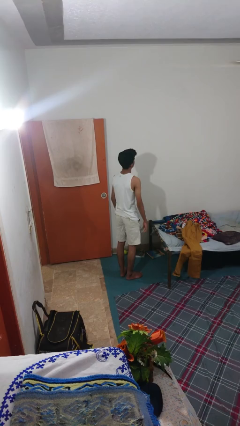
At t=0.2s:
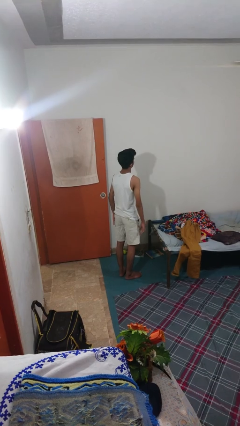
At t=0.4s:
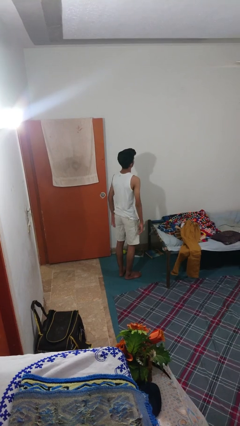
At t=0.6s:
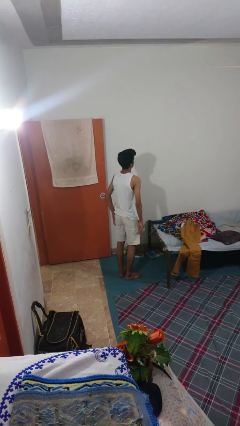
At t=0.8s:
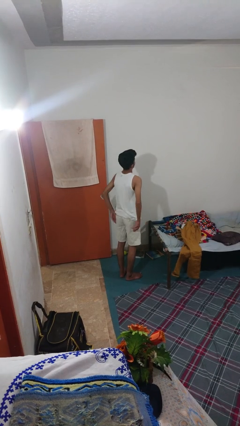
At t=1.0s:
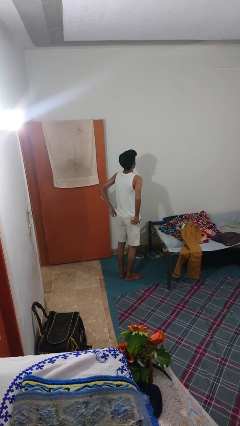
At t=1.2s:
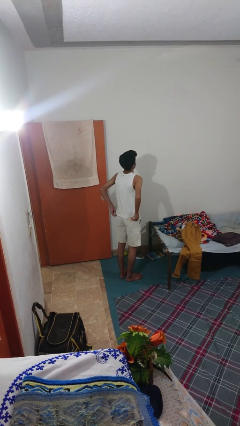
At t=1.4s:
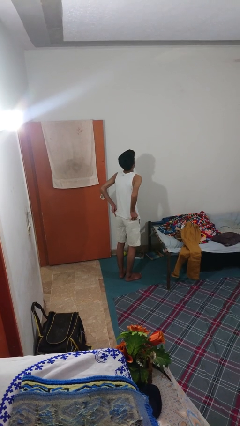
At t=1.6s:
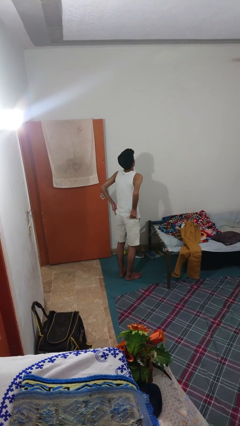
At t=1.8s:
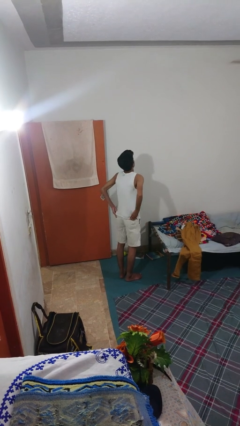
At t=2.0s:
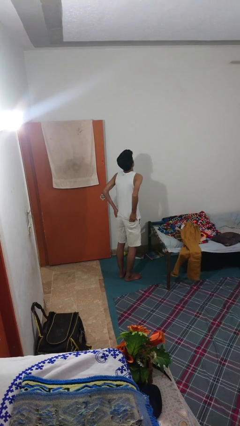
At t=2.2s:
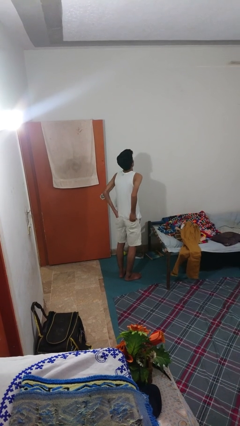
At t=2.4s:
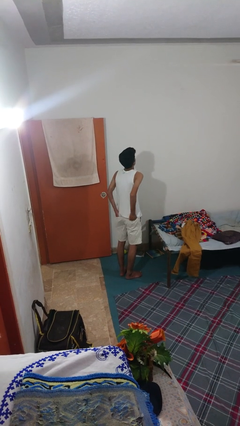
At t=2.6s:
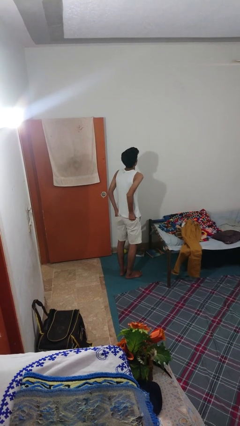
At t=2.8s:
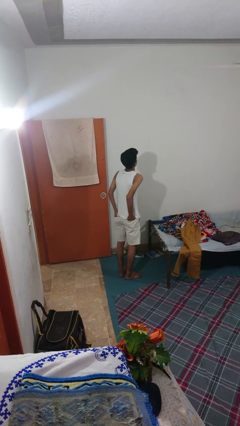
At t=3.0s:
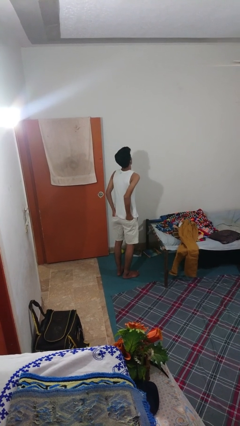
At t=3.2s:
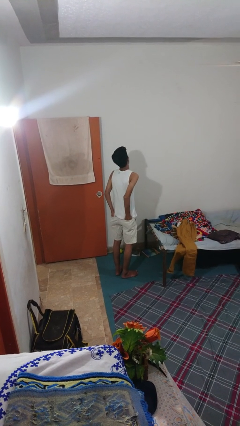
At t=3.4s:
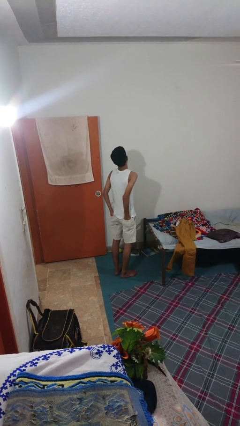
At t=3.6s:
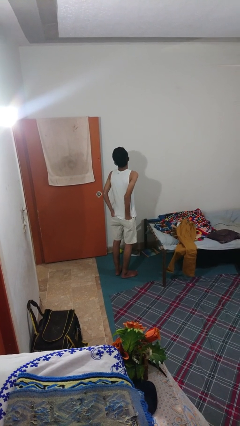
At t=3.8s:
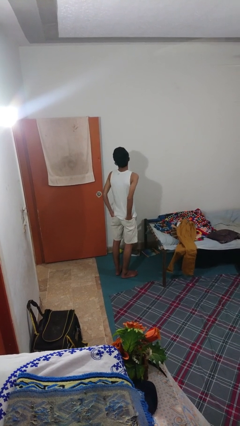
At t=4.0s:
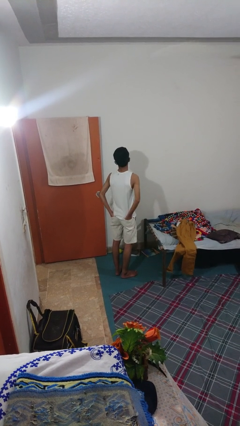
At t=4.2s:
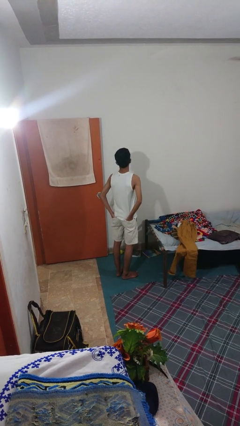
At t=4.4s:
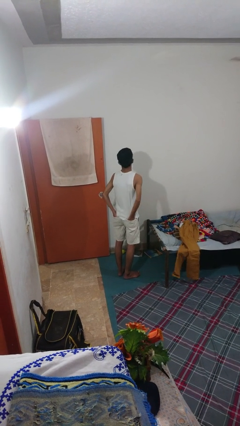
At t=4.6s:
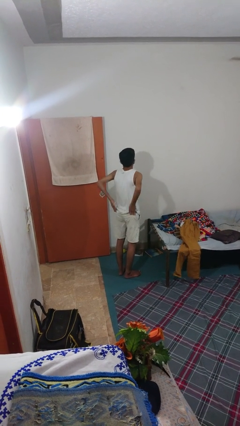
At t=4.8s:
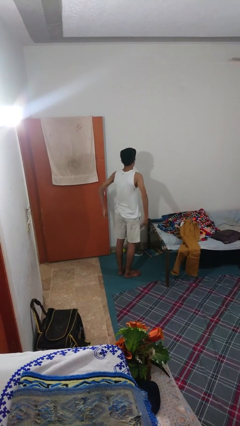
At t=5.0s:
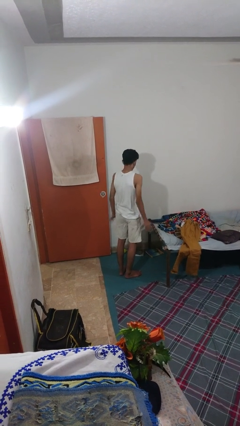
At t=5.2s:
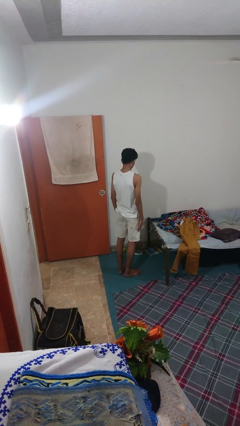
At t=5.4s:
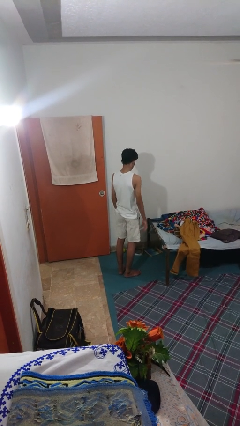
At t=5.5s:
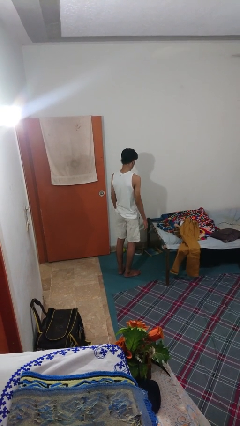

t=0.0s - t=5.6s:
person puts hands in back pockets

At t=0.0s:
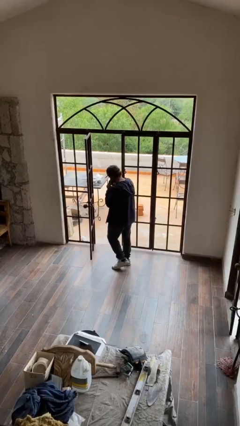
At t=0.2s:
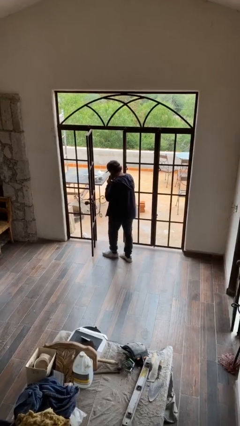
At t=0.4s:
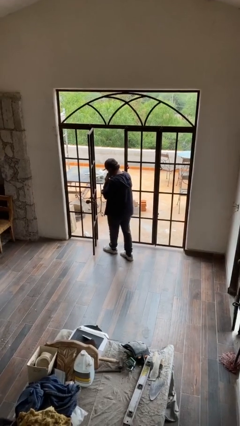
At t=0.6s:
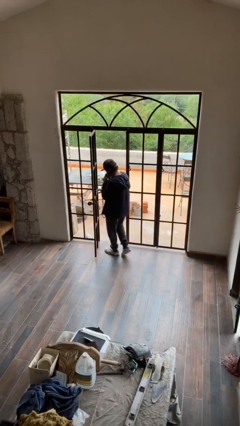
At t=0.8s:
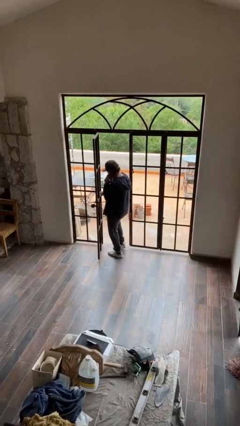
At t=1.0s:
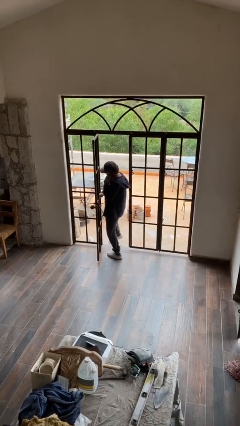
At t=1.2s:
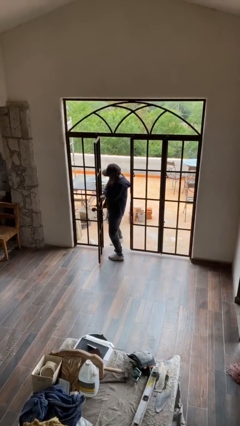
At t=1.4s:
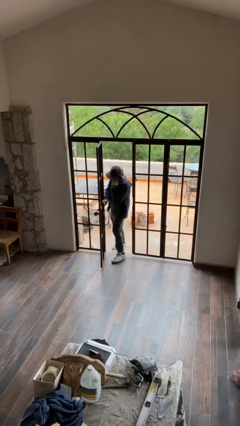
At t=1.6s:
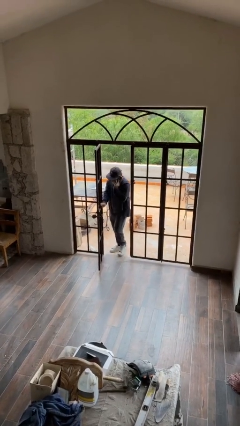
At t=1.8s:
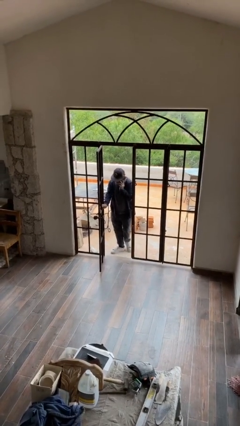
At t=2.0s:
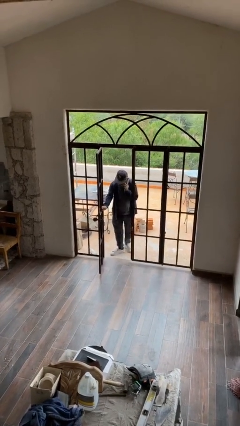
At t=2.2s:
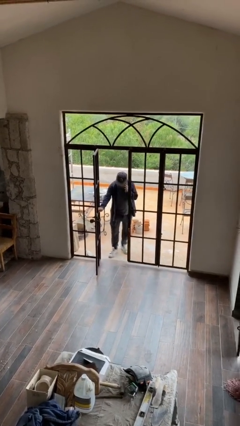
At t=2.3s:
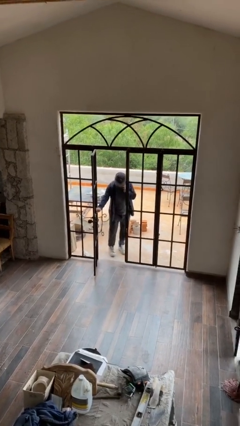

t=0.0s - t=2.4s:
person exits scene through structure

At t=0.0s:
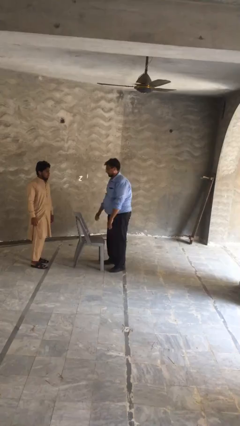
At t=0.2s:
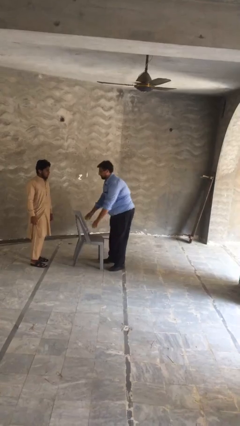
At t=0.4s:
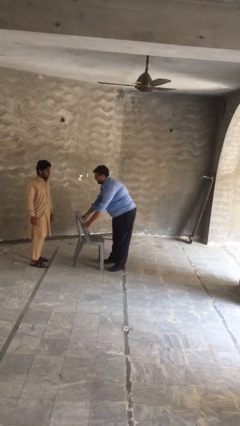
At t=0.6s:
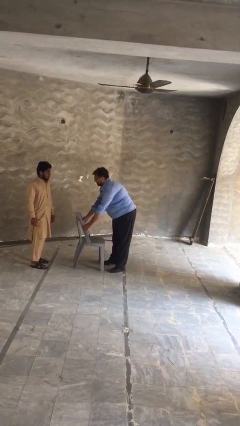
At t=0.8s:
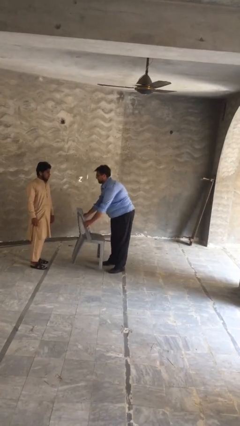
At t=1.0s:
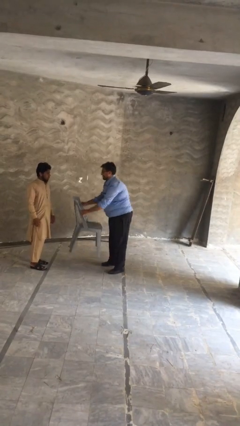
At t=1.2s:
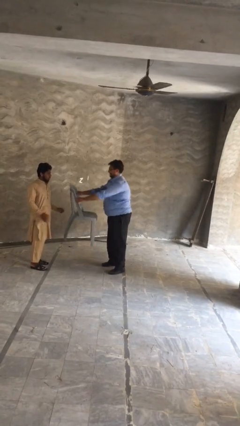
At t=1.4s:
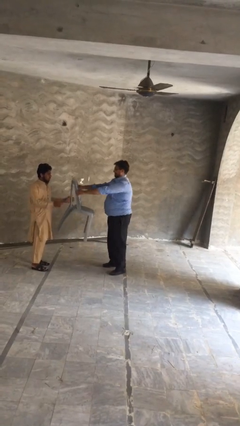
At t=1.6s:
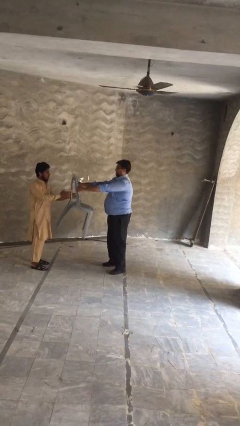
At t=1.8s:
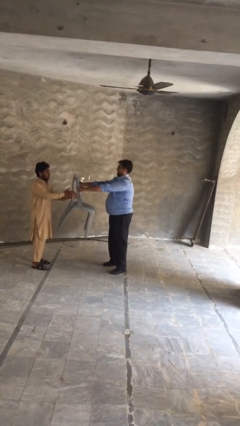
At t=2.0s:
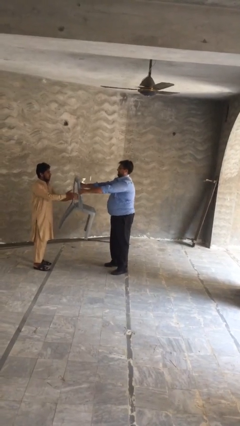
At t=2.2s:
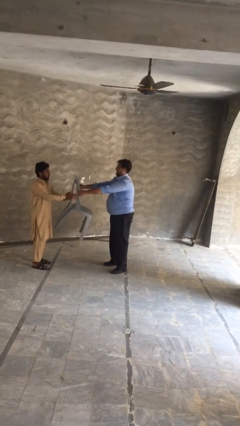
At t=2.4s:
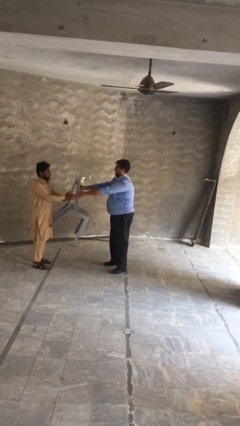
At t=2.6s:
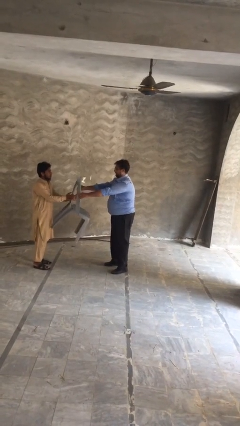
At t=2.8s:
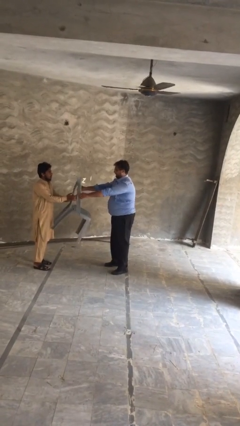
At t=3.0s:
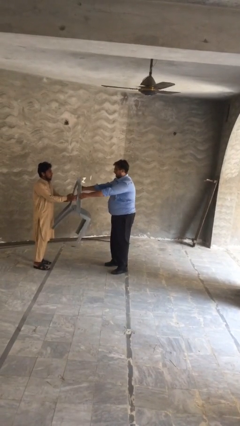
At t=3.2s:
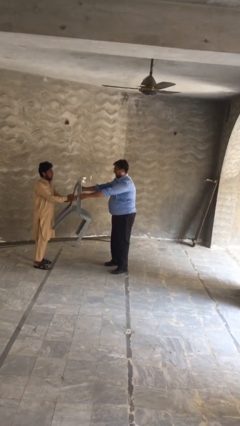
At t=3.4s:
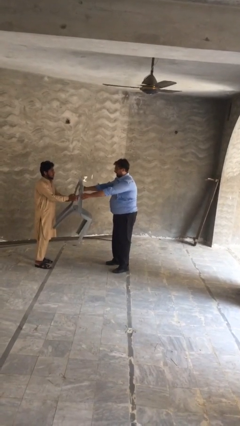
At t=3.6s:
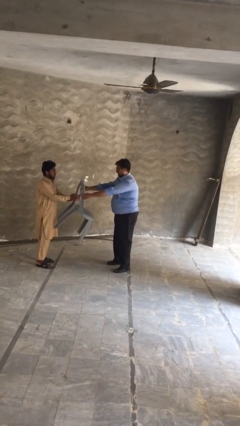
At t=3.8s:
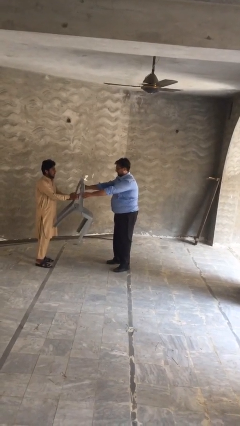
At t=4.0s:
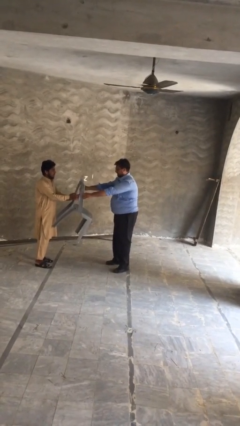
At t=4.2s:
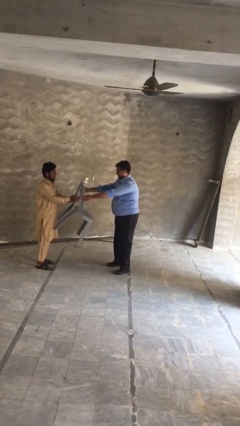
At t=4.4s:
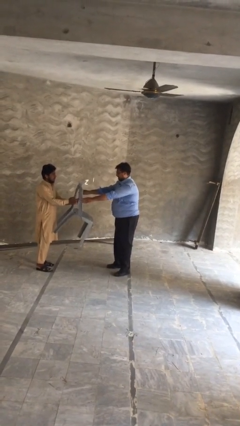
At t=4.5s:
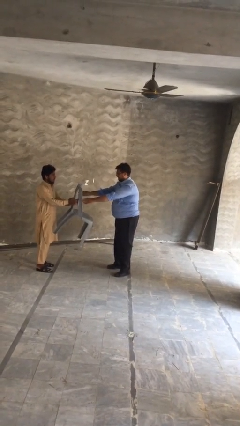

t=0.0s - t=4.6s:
person transfers object to person

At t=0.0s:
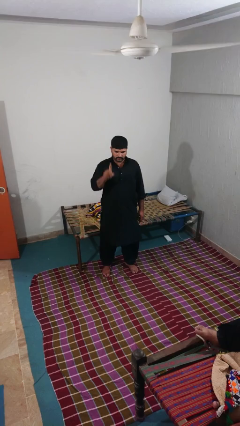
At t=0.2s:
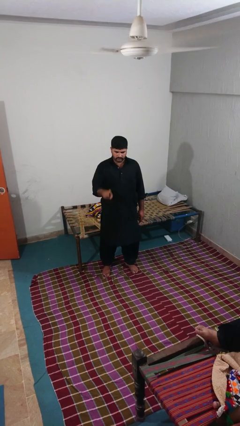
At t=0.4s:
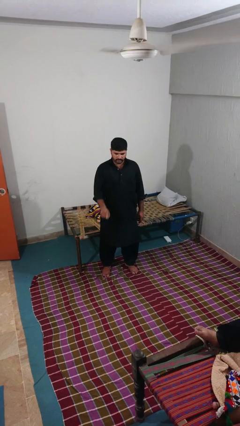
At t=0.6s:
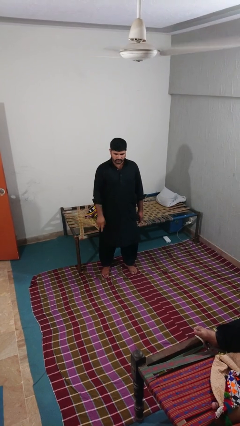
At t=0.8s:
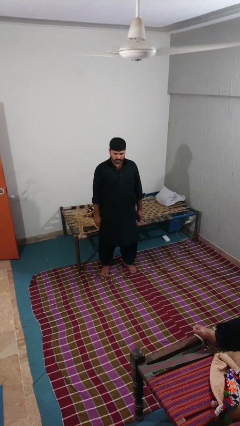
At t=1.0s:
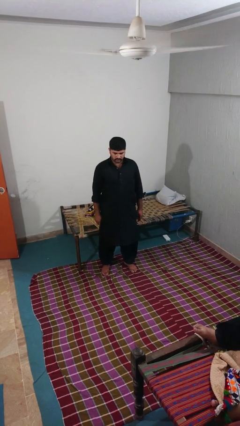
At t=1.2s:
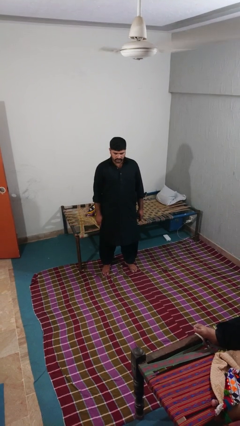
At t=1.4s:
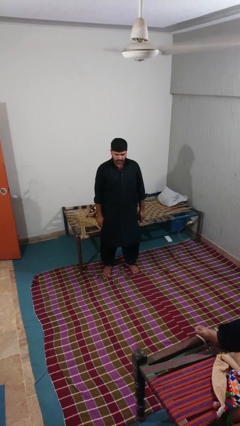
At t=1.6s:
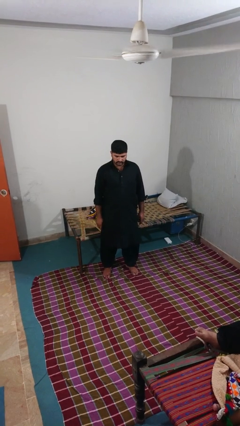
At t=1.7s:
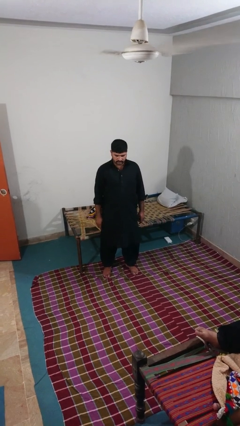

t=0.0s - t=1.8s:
person gestures swipe down

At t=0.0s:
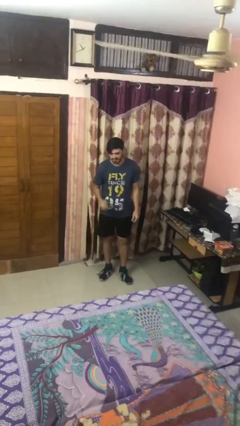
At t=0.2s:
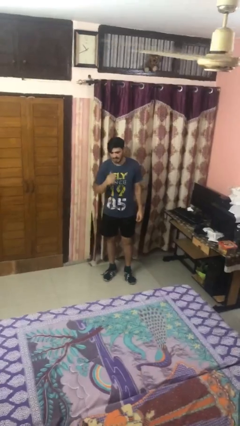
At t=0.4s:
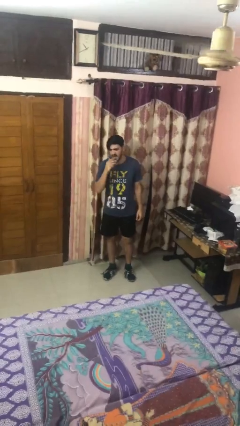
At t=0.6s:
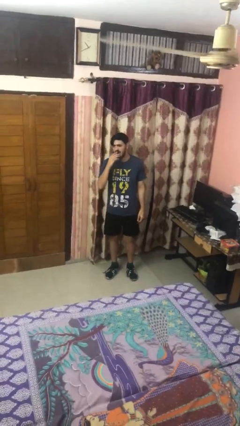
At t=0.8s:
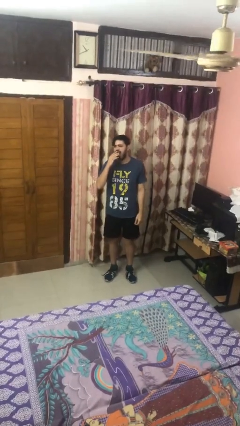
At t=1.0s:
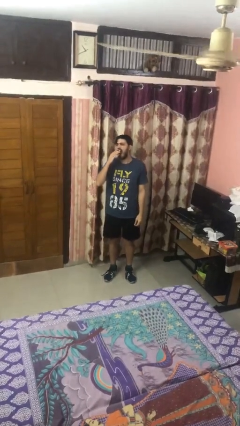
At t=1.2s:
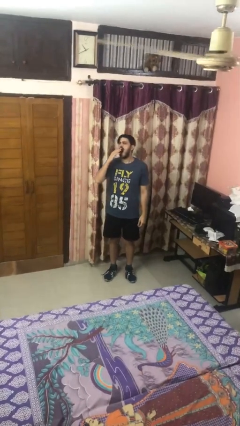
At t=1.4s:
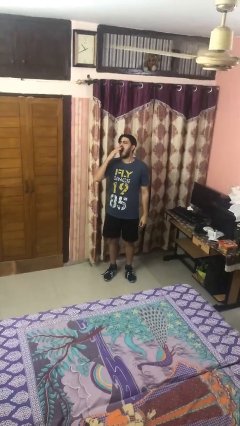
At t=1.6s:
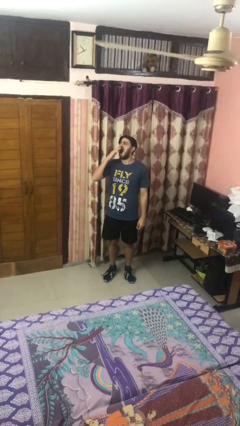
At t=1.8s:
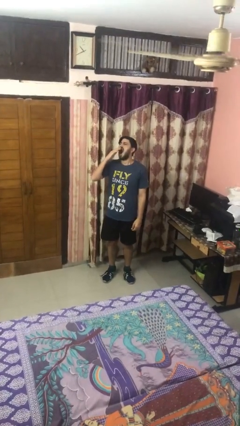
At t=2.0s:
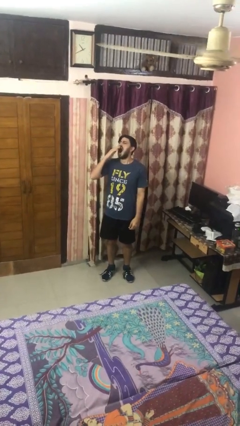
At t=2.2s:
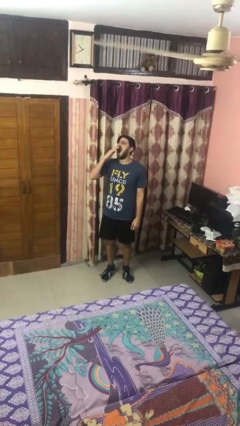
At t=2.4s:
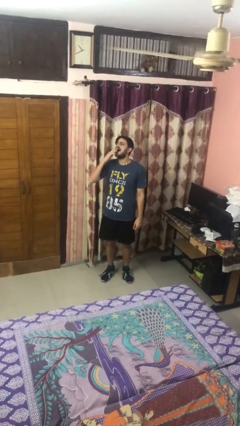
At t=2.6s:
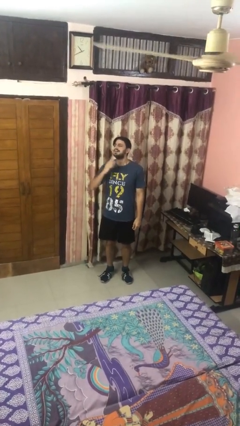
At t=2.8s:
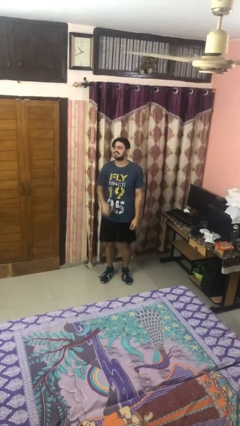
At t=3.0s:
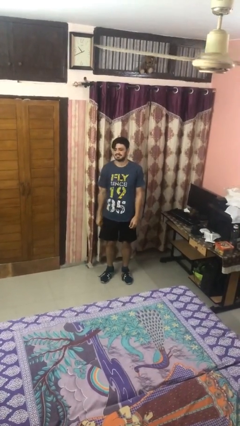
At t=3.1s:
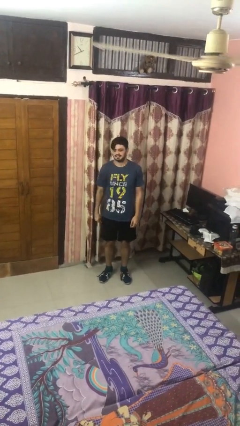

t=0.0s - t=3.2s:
person yawns
